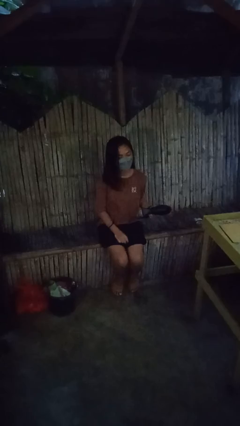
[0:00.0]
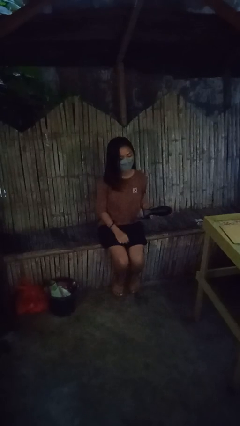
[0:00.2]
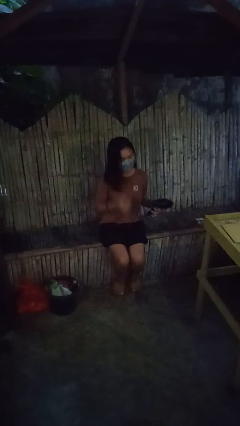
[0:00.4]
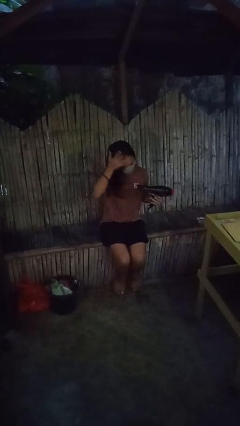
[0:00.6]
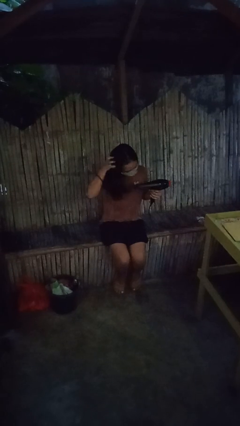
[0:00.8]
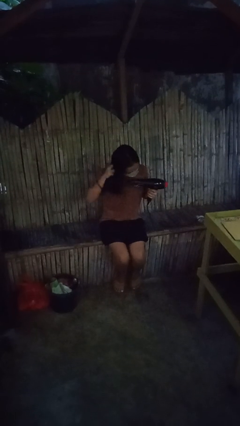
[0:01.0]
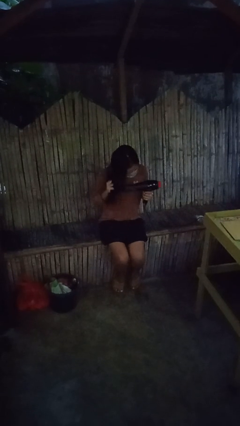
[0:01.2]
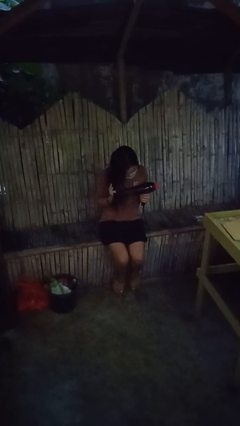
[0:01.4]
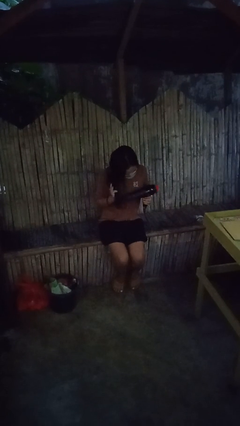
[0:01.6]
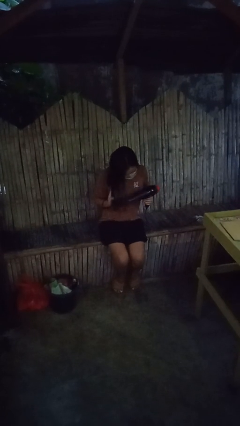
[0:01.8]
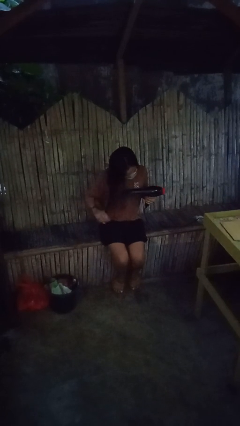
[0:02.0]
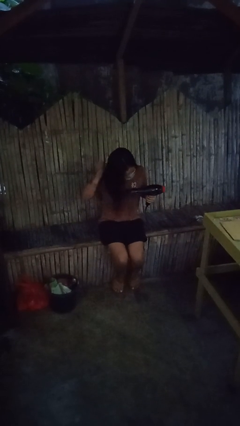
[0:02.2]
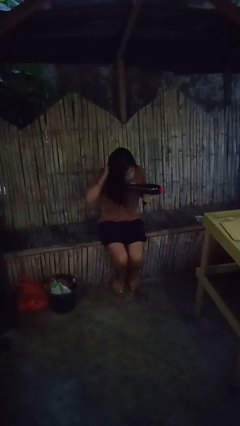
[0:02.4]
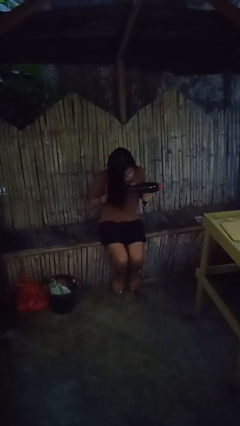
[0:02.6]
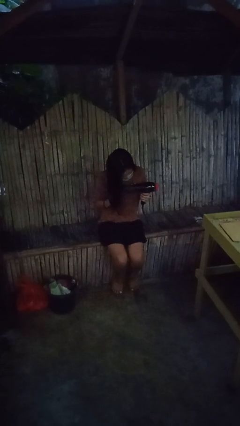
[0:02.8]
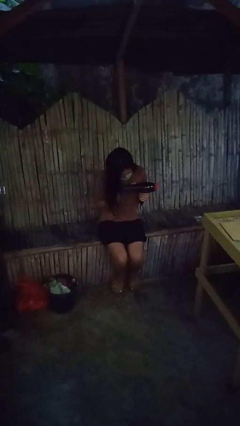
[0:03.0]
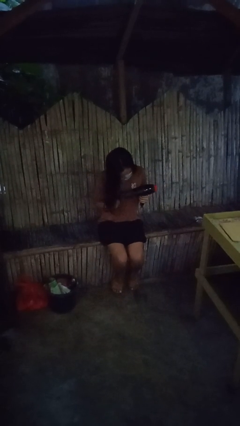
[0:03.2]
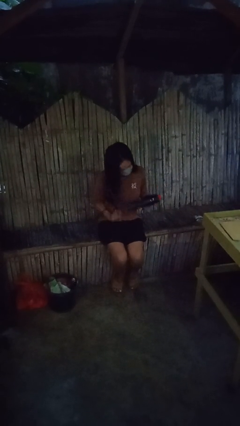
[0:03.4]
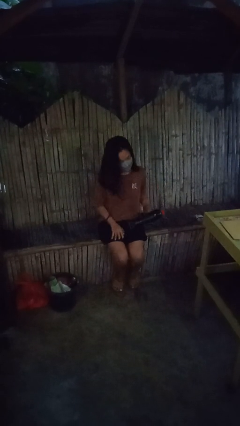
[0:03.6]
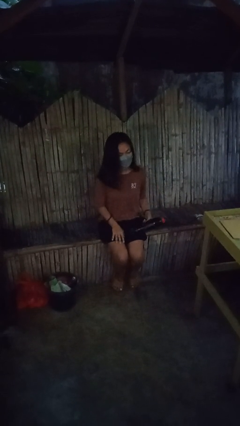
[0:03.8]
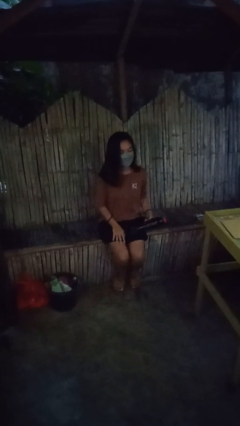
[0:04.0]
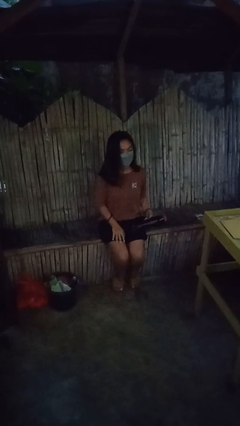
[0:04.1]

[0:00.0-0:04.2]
person dries hair with hairdryer

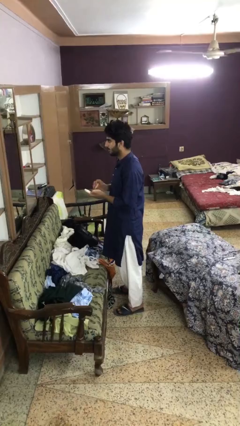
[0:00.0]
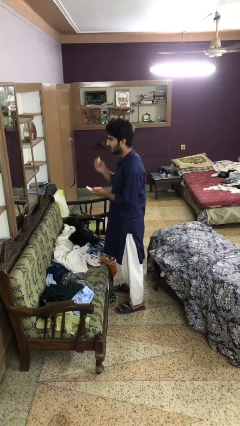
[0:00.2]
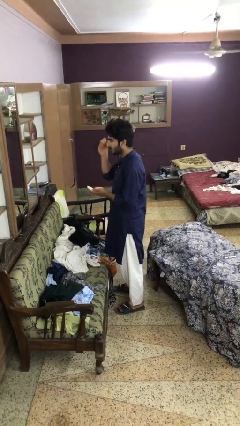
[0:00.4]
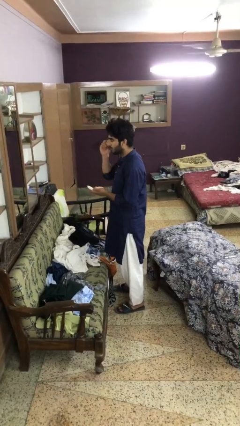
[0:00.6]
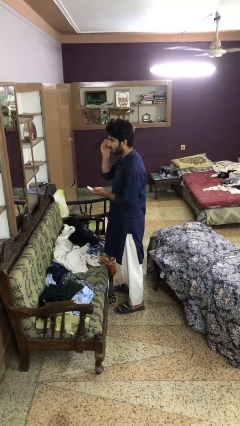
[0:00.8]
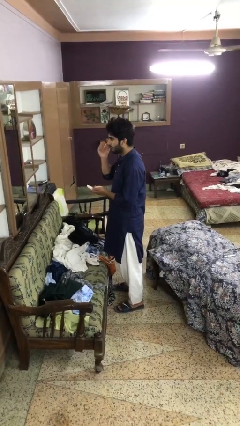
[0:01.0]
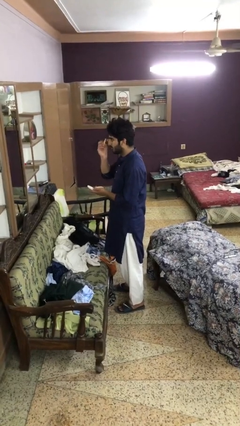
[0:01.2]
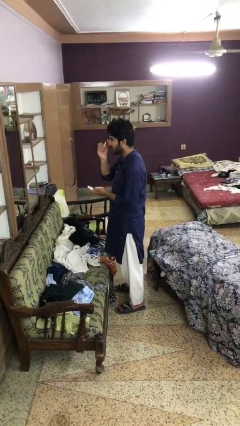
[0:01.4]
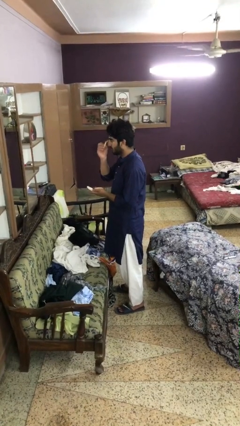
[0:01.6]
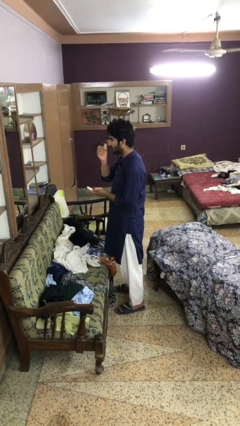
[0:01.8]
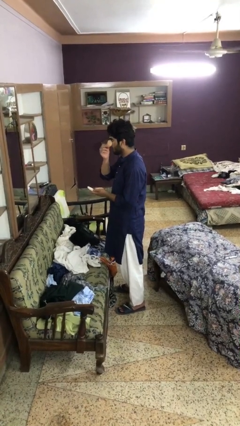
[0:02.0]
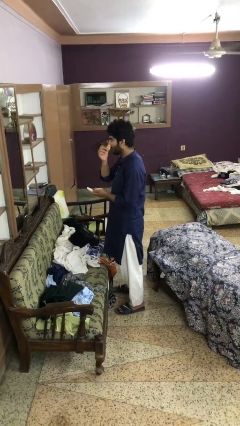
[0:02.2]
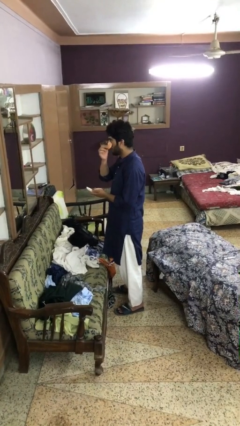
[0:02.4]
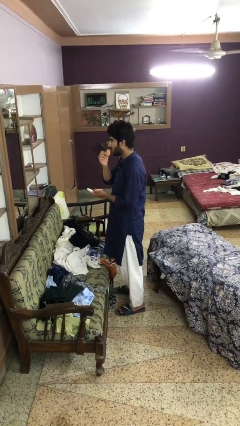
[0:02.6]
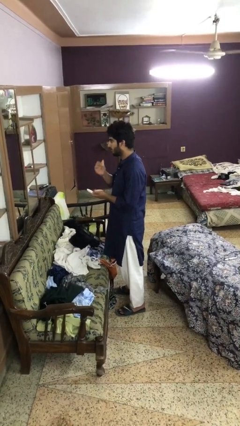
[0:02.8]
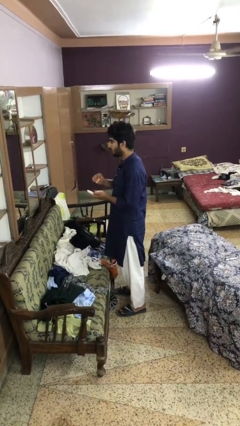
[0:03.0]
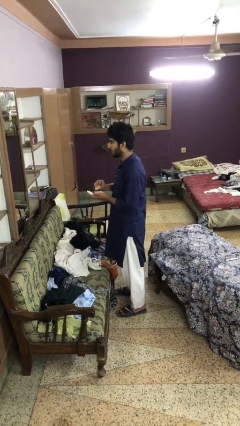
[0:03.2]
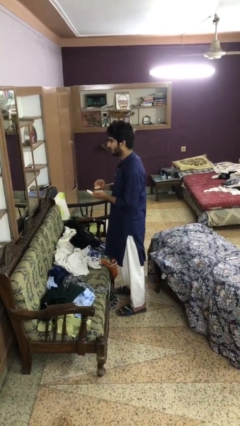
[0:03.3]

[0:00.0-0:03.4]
person applies foundation makeup

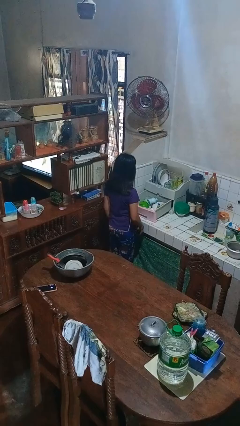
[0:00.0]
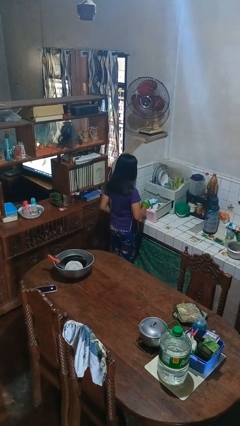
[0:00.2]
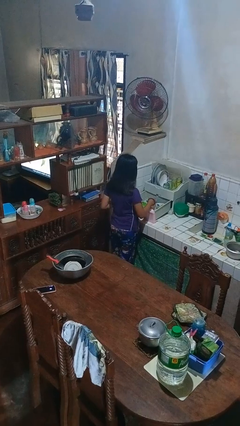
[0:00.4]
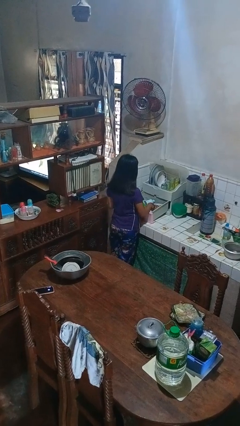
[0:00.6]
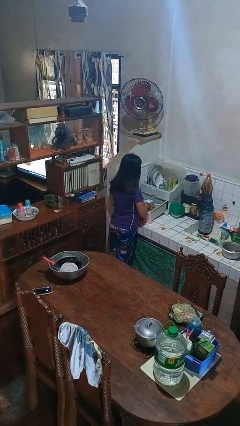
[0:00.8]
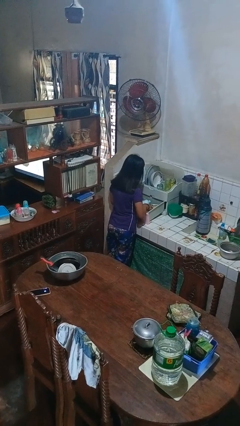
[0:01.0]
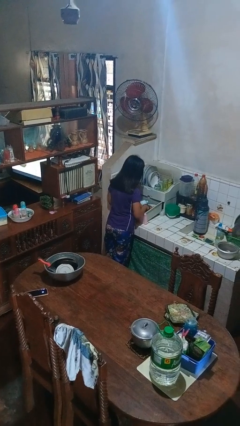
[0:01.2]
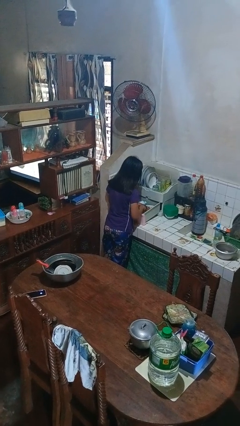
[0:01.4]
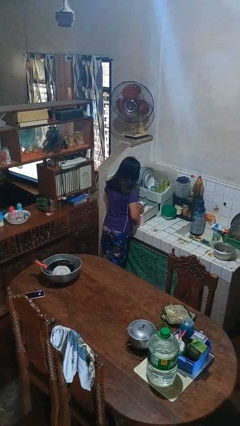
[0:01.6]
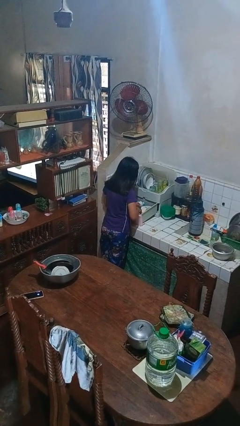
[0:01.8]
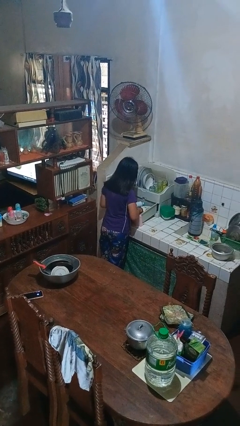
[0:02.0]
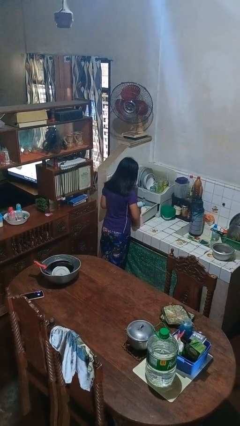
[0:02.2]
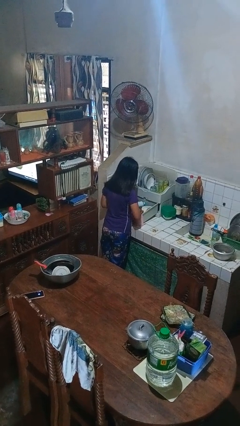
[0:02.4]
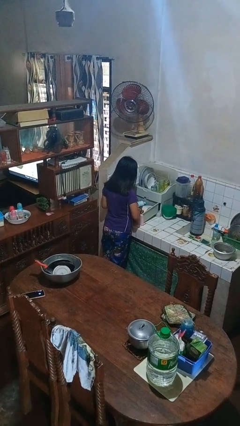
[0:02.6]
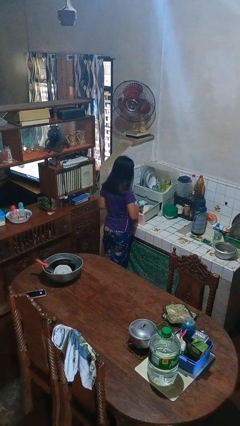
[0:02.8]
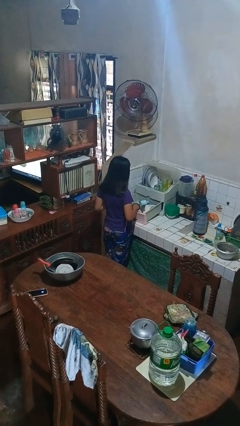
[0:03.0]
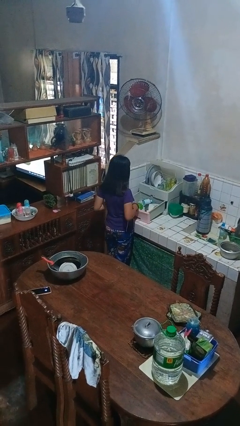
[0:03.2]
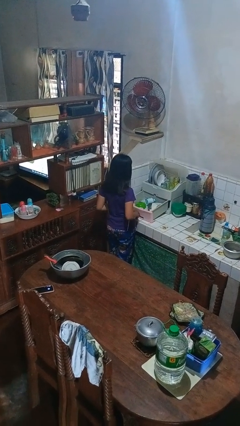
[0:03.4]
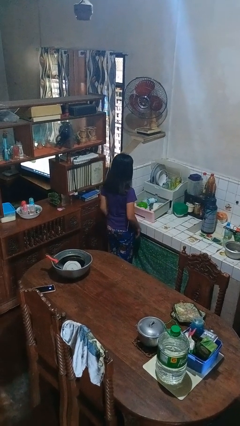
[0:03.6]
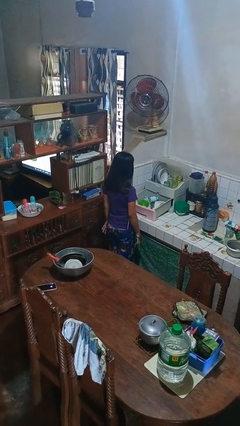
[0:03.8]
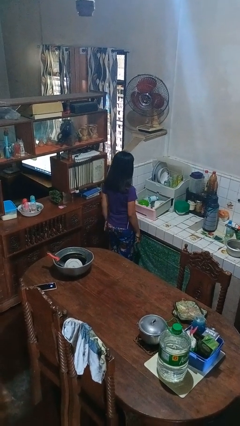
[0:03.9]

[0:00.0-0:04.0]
person searches in kitchen drawer

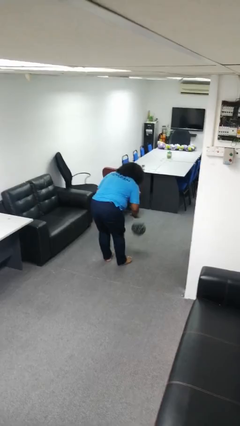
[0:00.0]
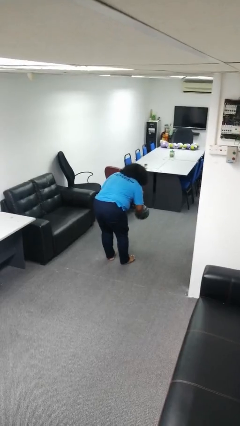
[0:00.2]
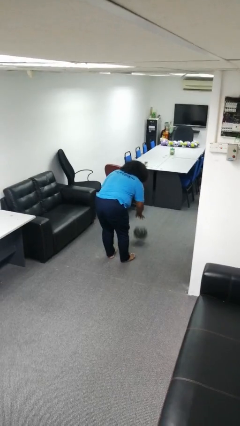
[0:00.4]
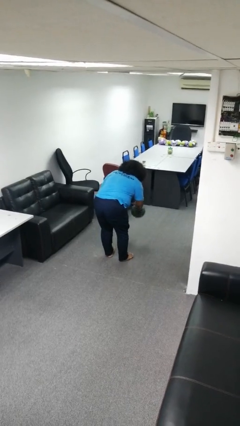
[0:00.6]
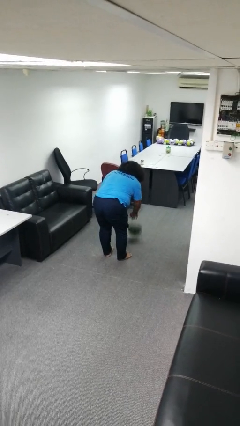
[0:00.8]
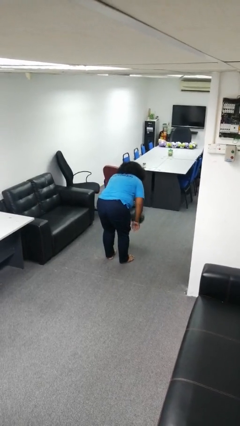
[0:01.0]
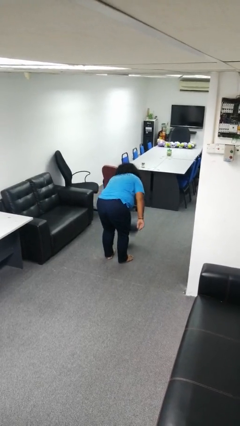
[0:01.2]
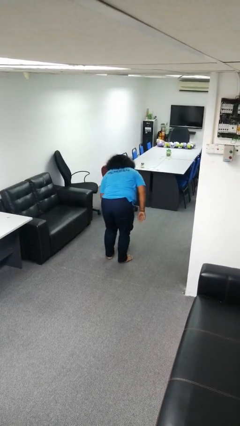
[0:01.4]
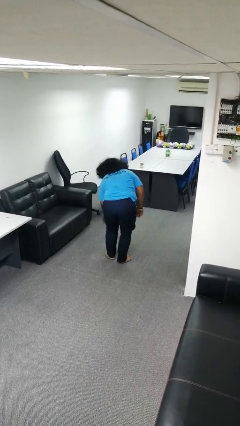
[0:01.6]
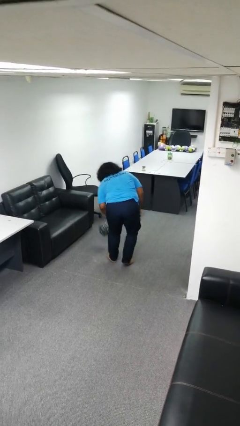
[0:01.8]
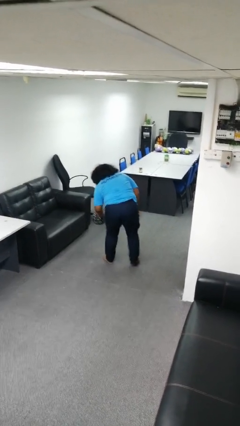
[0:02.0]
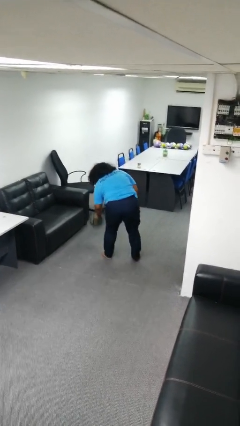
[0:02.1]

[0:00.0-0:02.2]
person bounces ball on floor

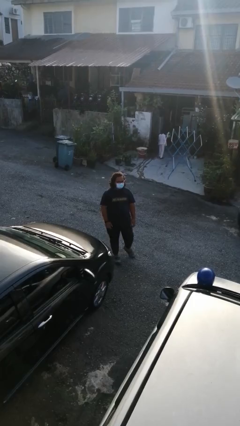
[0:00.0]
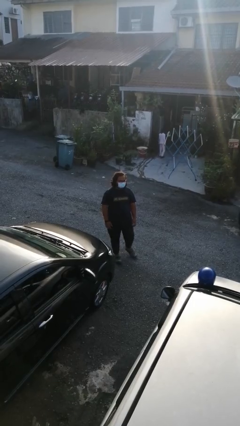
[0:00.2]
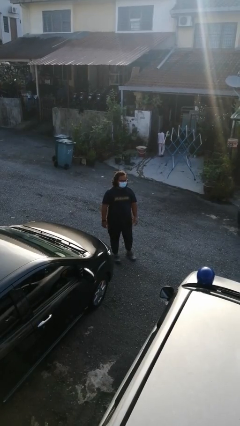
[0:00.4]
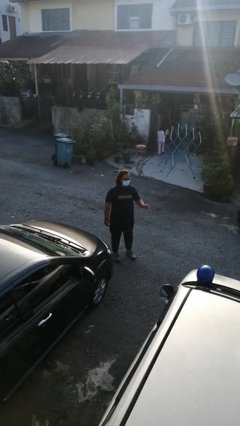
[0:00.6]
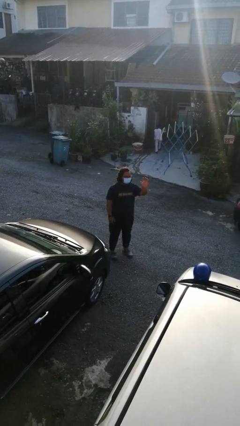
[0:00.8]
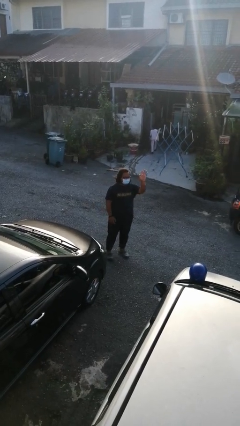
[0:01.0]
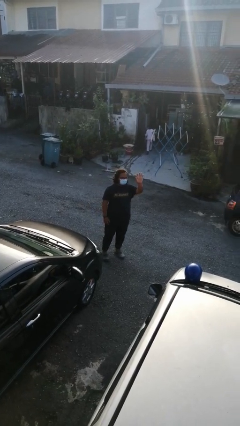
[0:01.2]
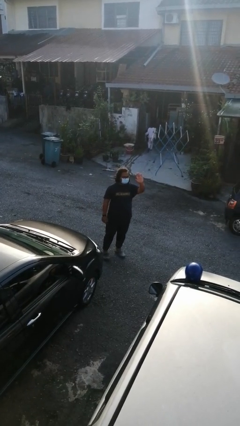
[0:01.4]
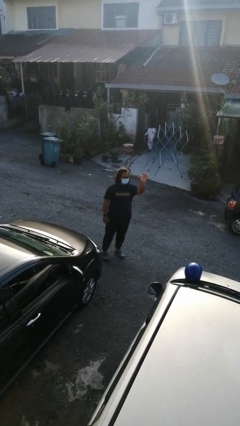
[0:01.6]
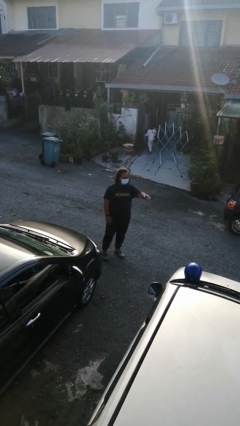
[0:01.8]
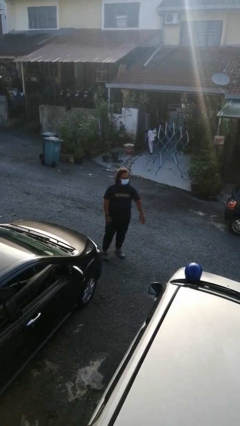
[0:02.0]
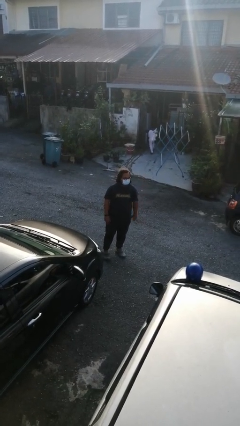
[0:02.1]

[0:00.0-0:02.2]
person waves at person

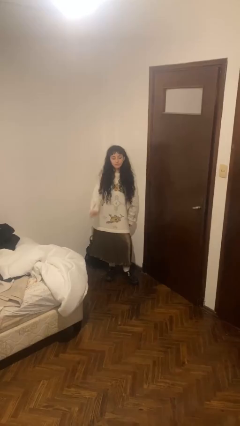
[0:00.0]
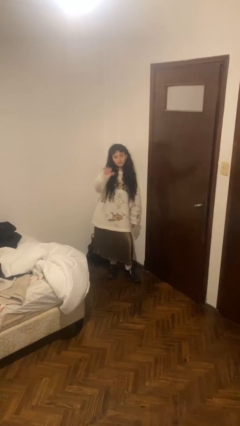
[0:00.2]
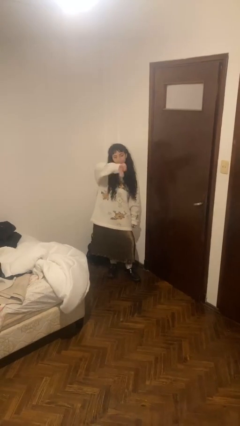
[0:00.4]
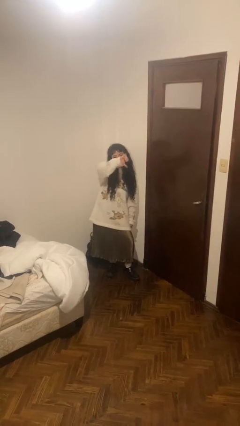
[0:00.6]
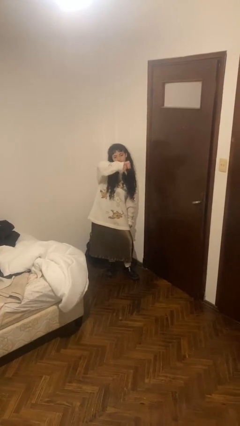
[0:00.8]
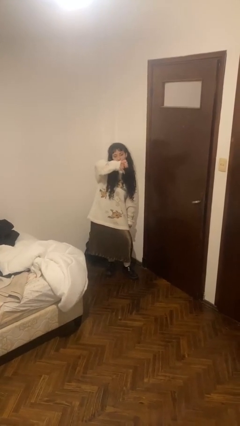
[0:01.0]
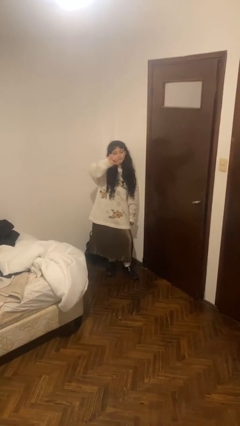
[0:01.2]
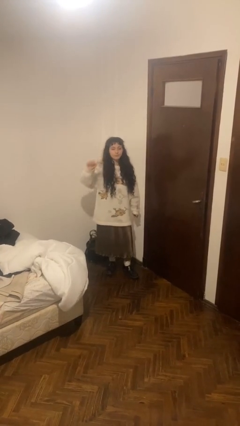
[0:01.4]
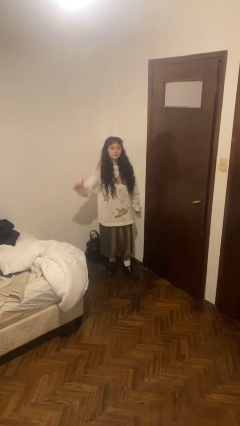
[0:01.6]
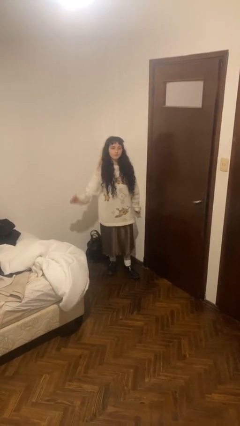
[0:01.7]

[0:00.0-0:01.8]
person gestures thumbs down
